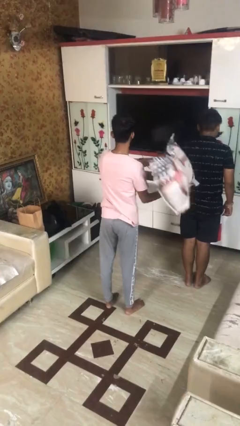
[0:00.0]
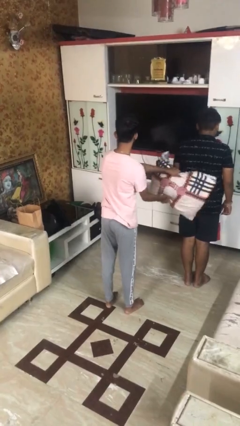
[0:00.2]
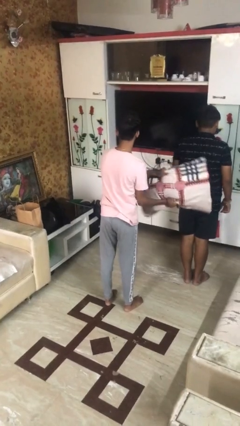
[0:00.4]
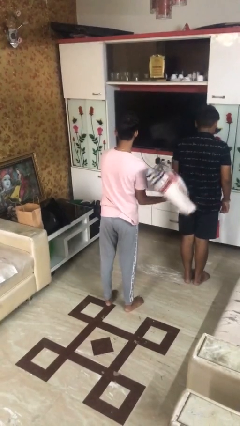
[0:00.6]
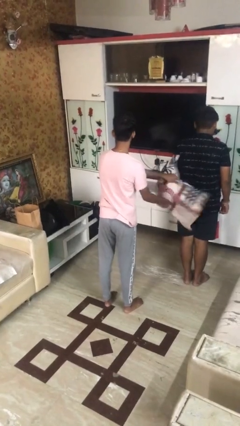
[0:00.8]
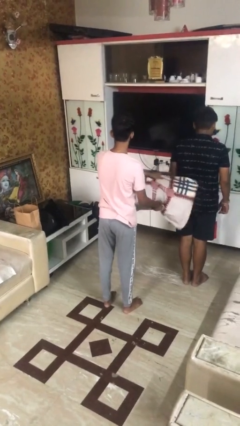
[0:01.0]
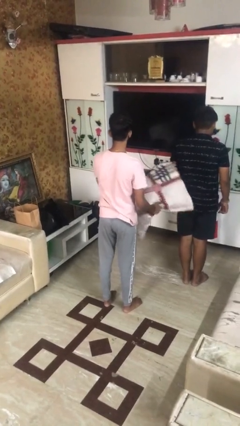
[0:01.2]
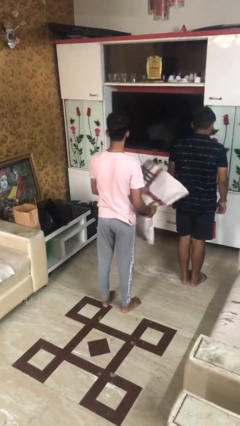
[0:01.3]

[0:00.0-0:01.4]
person hits person with pillow

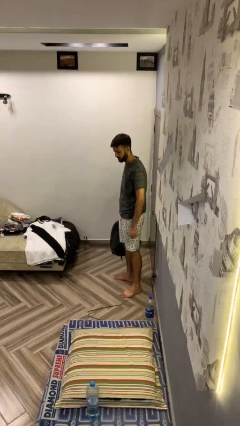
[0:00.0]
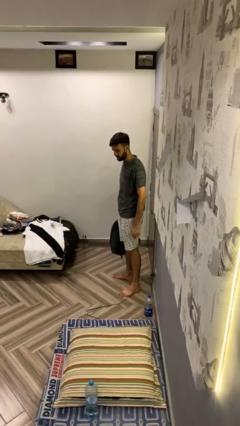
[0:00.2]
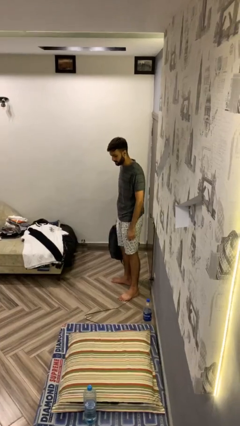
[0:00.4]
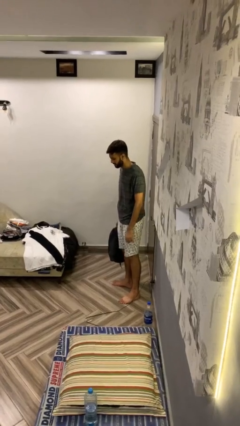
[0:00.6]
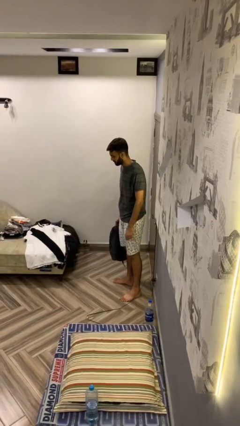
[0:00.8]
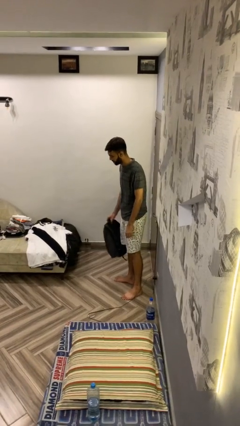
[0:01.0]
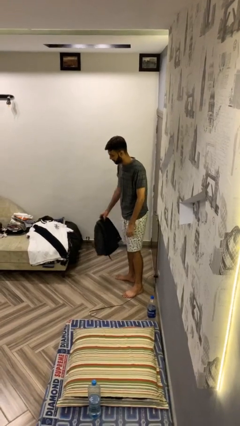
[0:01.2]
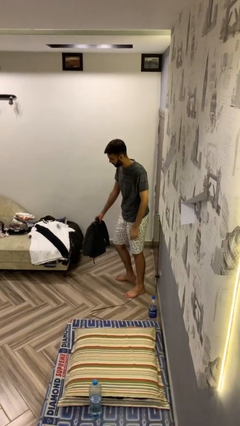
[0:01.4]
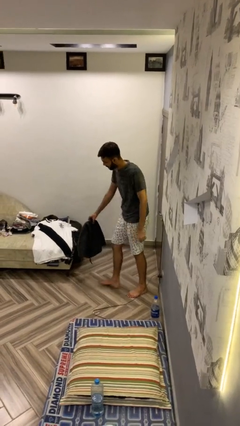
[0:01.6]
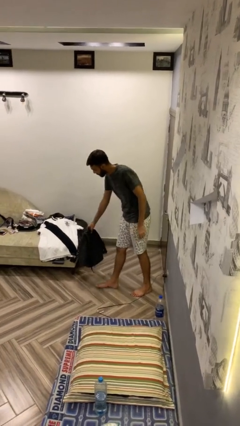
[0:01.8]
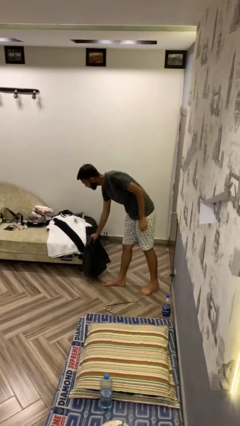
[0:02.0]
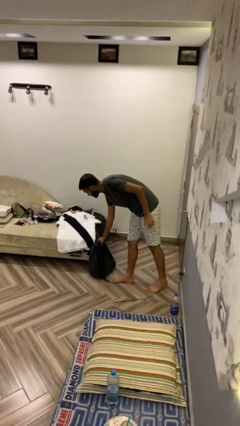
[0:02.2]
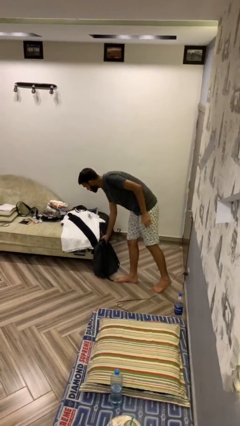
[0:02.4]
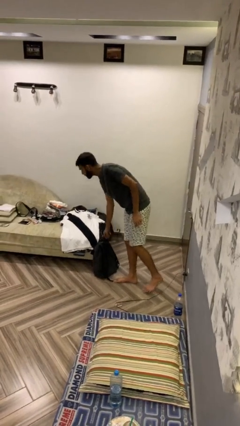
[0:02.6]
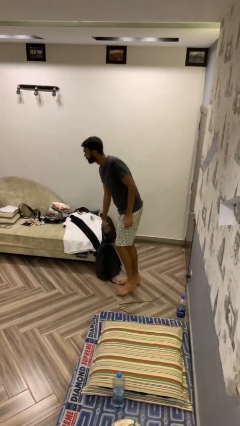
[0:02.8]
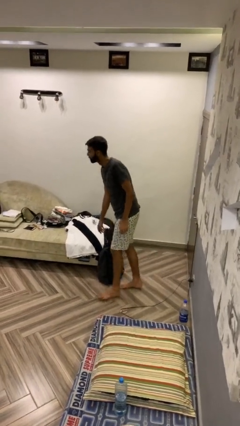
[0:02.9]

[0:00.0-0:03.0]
person puts down object on floor

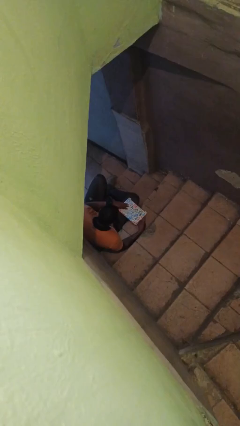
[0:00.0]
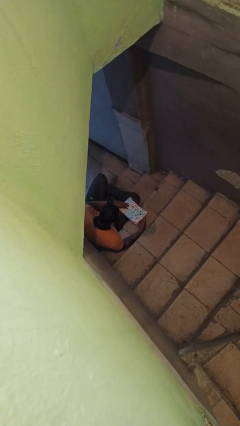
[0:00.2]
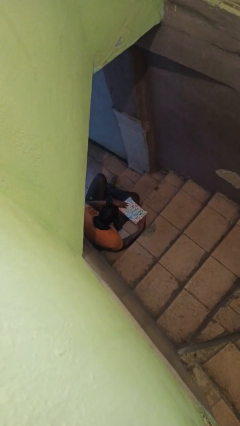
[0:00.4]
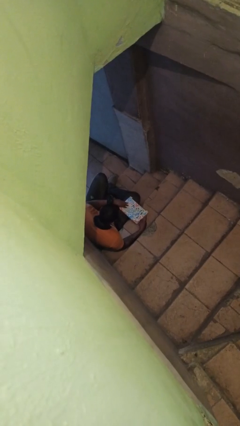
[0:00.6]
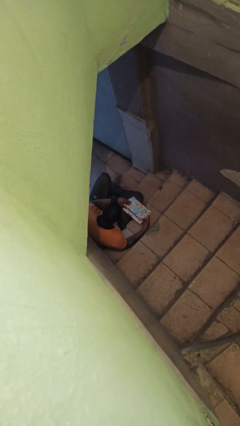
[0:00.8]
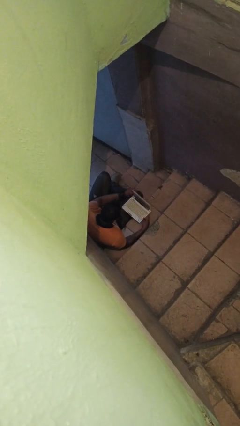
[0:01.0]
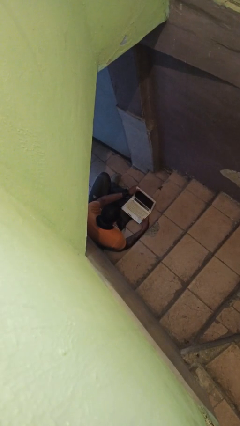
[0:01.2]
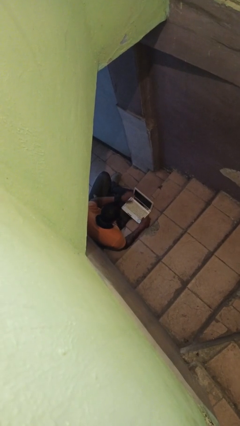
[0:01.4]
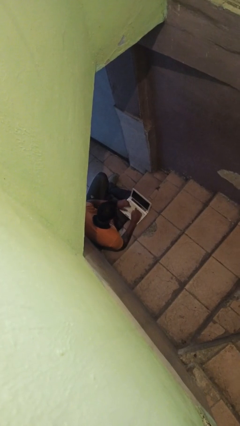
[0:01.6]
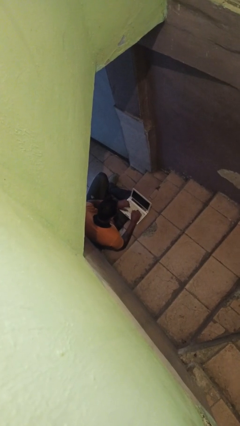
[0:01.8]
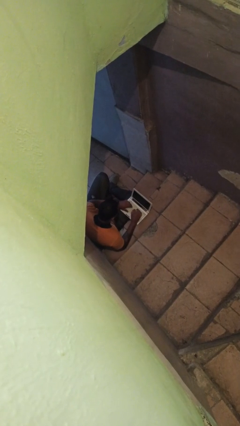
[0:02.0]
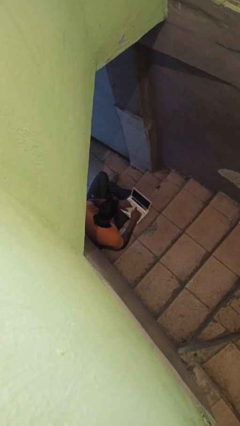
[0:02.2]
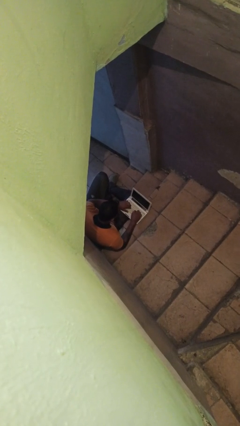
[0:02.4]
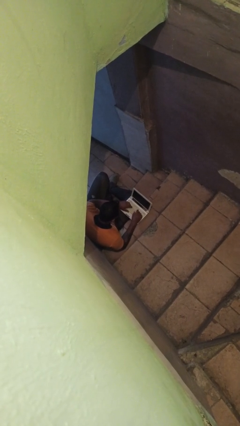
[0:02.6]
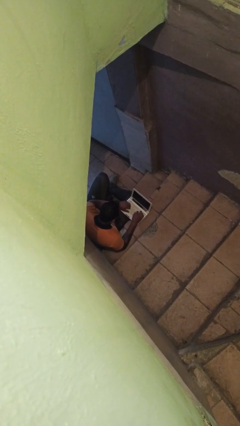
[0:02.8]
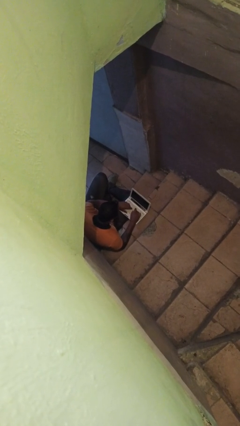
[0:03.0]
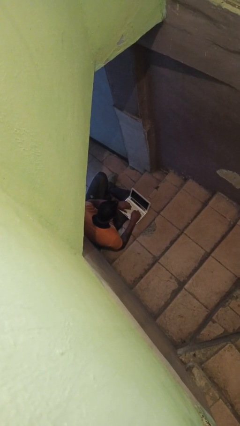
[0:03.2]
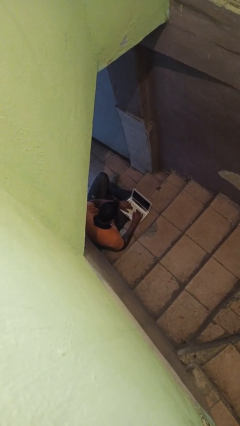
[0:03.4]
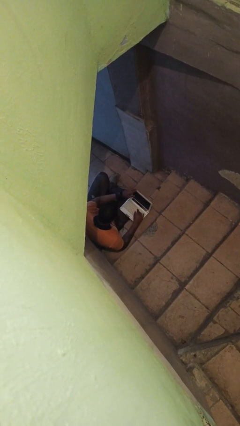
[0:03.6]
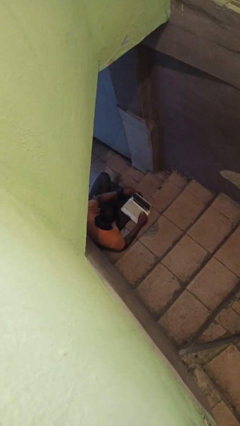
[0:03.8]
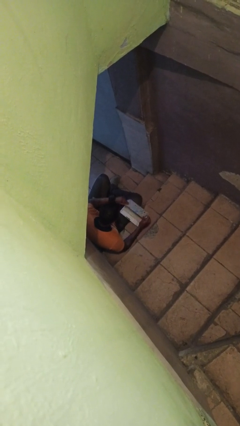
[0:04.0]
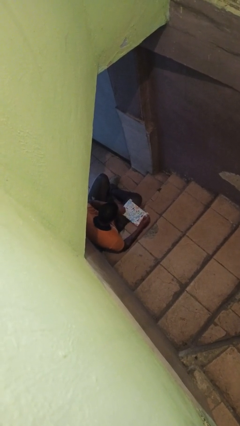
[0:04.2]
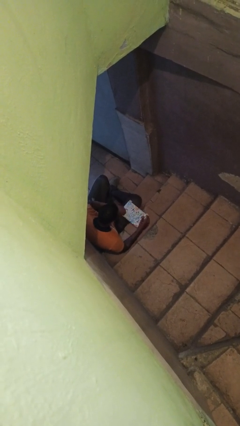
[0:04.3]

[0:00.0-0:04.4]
person interacts with laptop

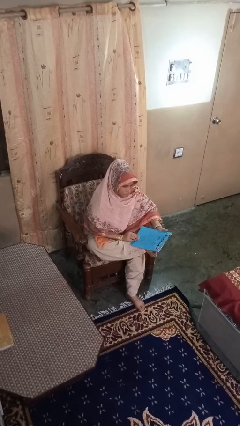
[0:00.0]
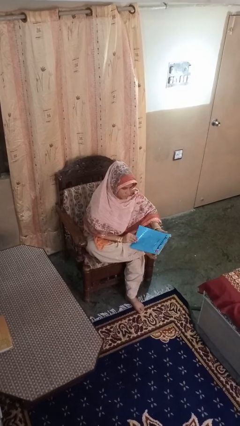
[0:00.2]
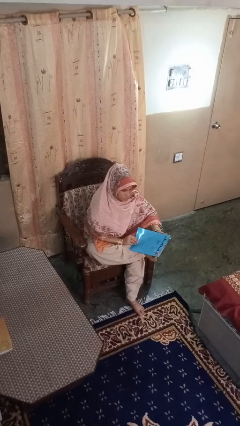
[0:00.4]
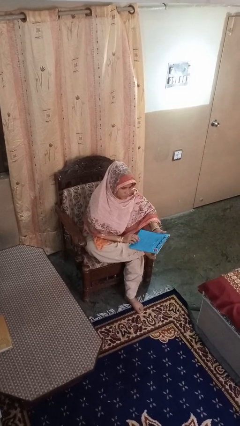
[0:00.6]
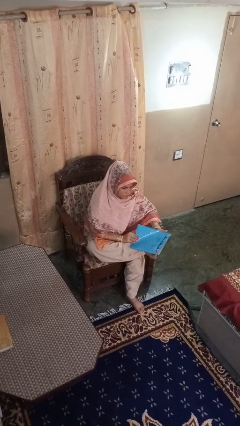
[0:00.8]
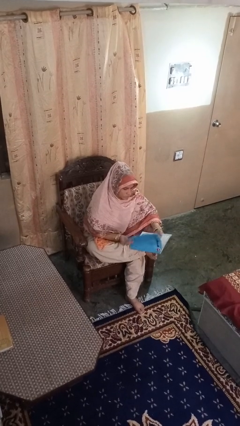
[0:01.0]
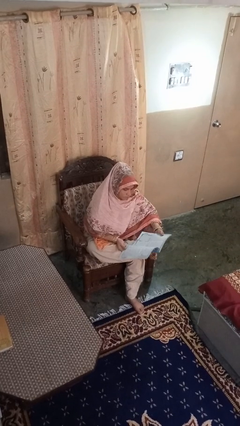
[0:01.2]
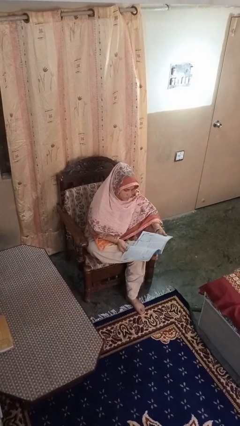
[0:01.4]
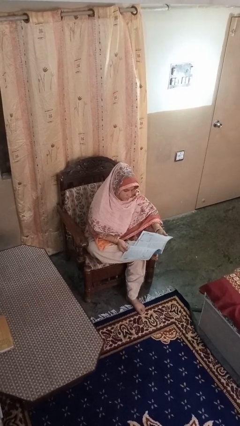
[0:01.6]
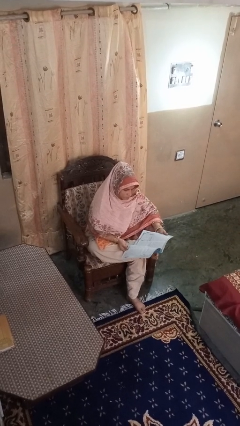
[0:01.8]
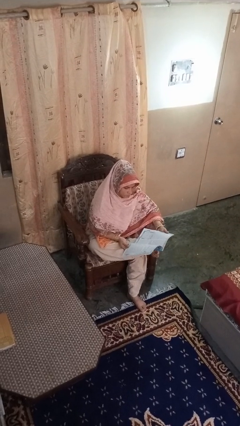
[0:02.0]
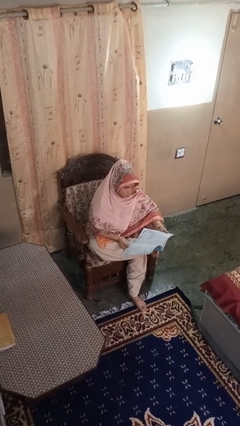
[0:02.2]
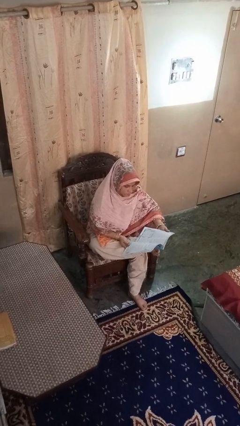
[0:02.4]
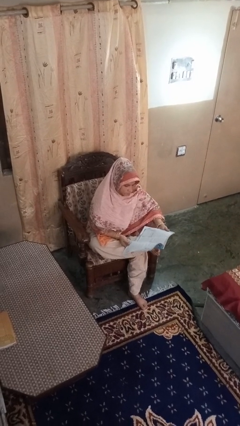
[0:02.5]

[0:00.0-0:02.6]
person reads magazine

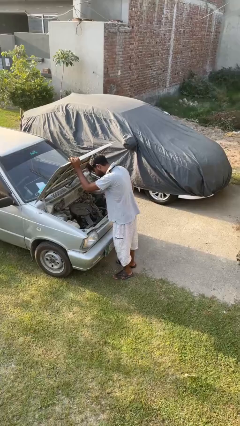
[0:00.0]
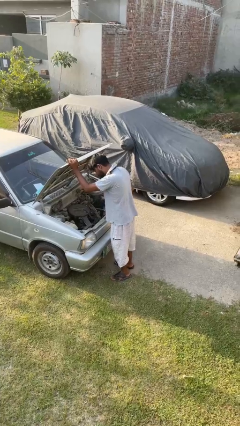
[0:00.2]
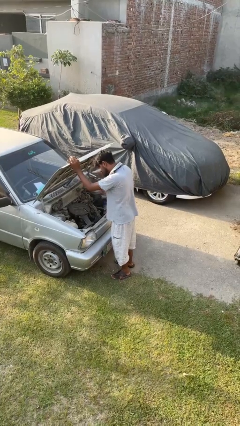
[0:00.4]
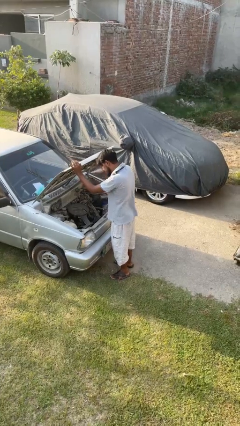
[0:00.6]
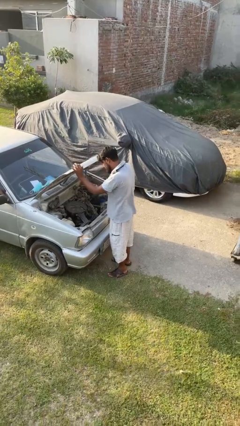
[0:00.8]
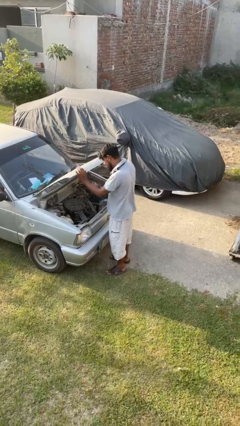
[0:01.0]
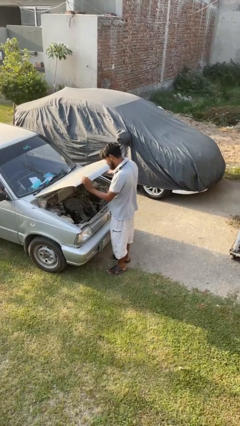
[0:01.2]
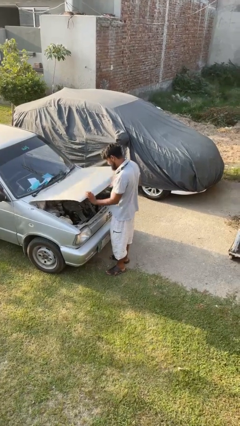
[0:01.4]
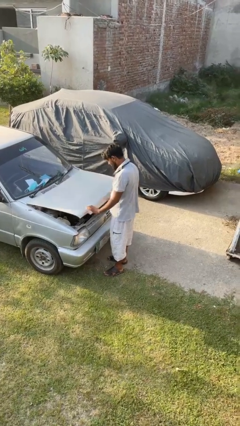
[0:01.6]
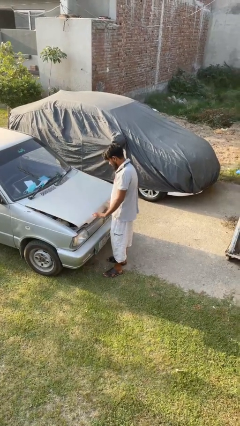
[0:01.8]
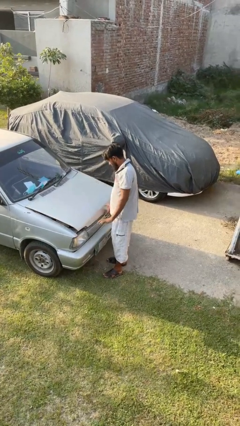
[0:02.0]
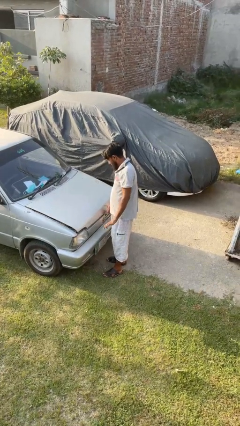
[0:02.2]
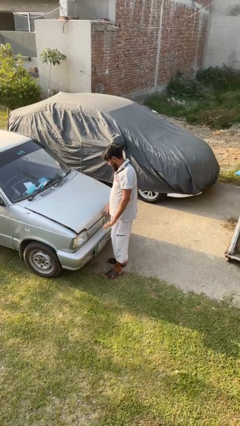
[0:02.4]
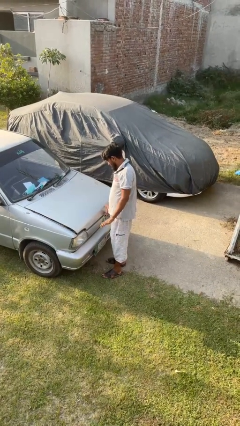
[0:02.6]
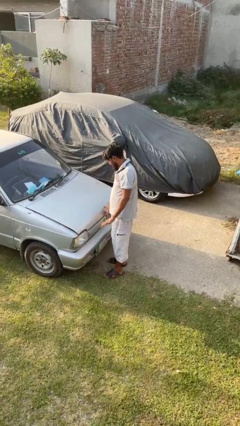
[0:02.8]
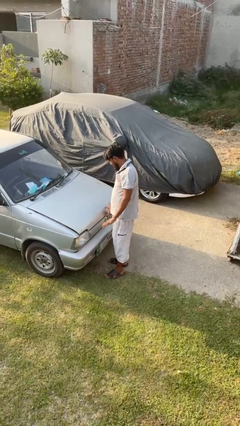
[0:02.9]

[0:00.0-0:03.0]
person closes car hood

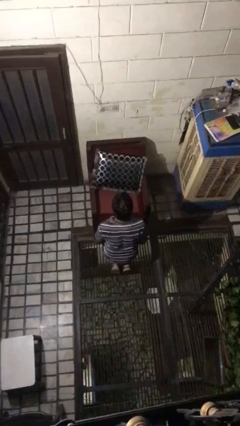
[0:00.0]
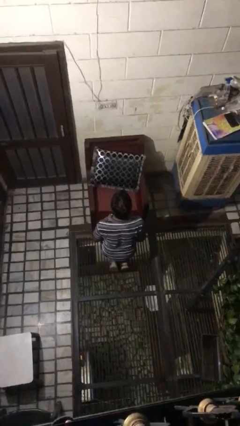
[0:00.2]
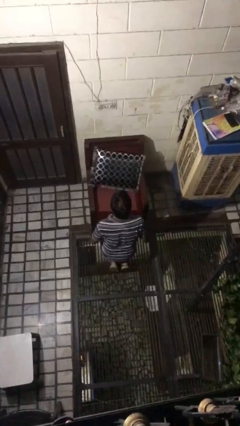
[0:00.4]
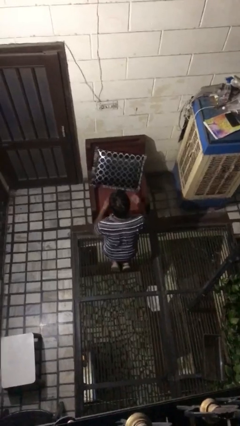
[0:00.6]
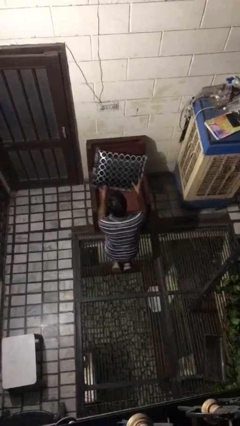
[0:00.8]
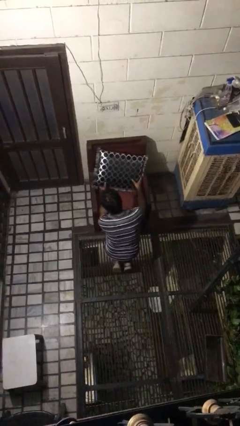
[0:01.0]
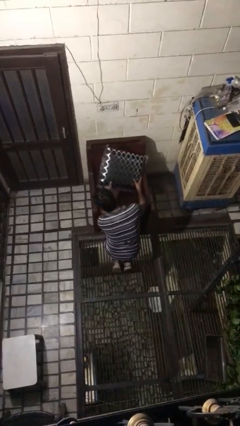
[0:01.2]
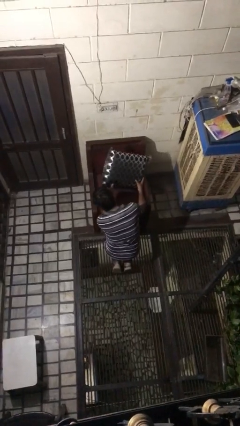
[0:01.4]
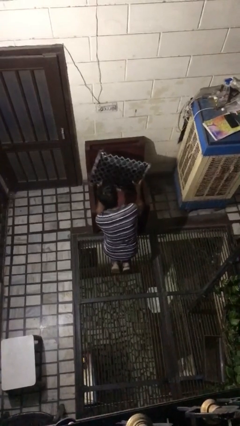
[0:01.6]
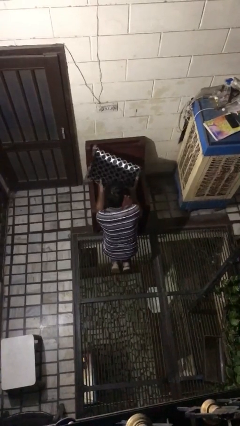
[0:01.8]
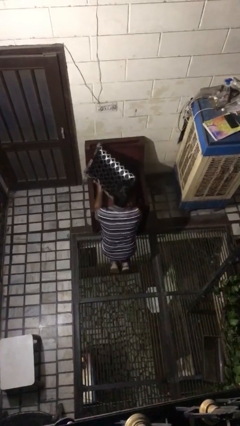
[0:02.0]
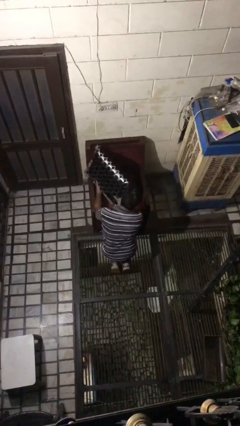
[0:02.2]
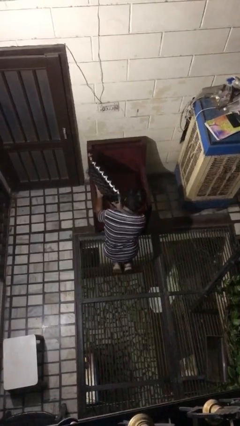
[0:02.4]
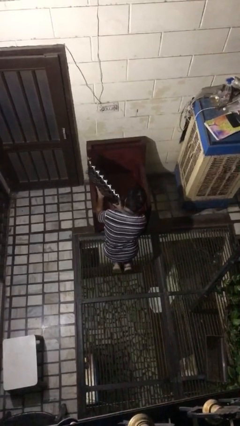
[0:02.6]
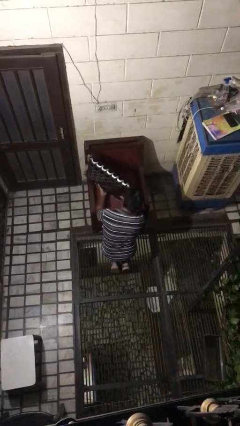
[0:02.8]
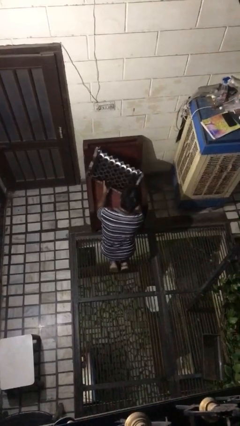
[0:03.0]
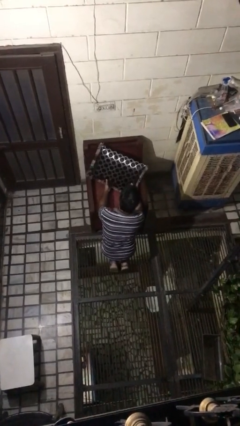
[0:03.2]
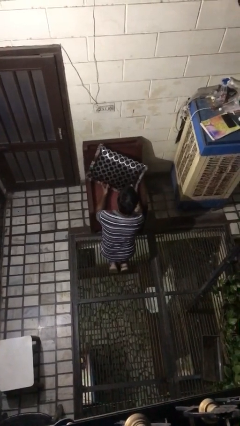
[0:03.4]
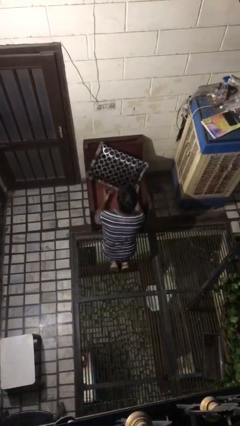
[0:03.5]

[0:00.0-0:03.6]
person searches in couch
